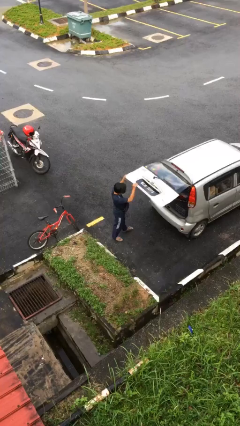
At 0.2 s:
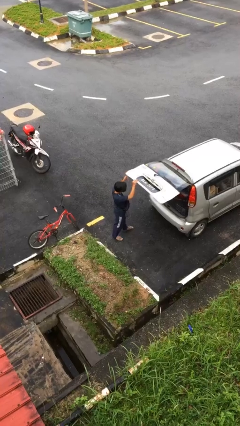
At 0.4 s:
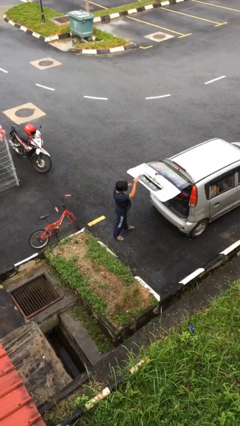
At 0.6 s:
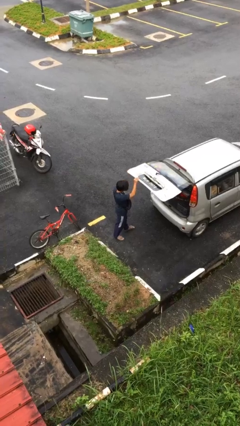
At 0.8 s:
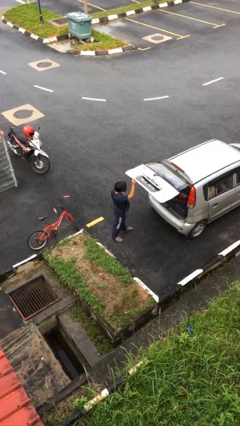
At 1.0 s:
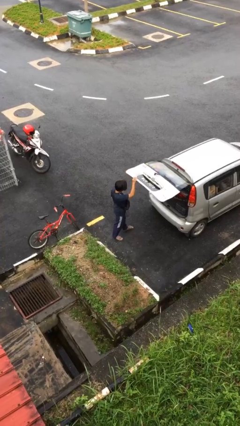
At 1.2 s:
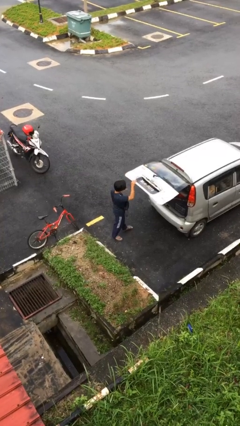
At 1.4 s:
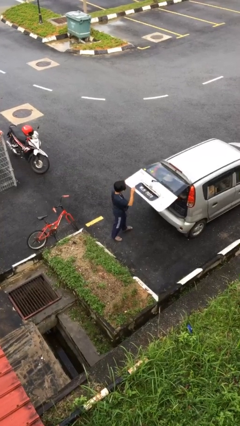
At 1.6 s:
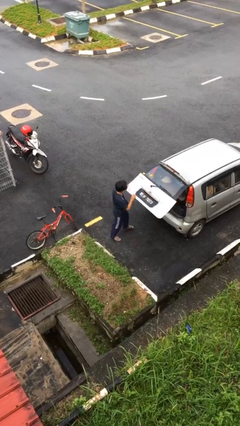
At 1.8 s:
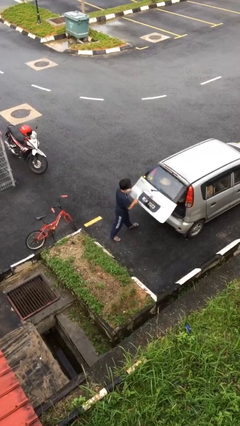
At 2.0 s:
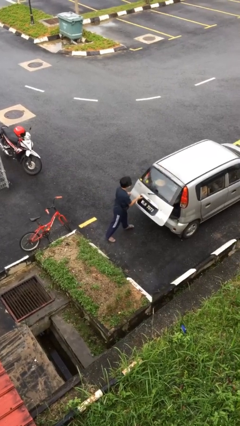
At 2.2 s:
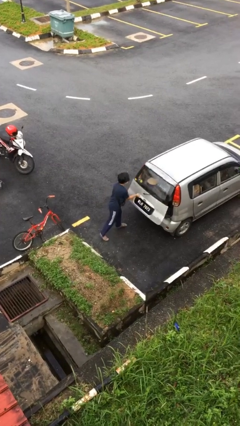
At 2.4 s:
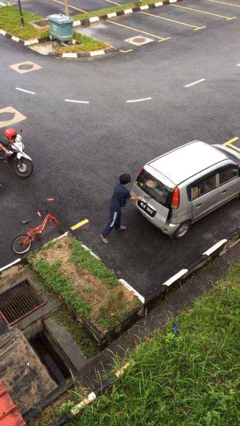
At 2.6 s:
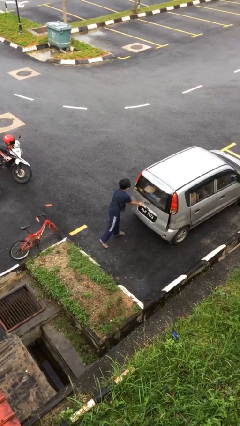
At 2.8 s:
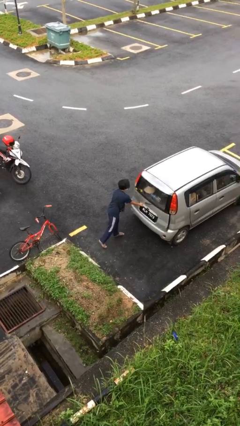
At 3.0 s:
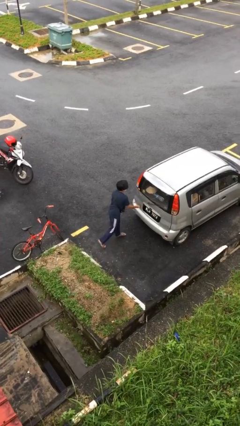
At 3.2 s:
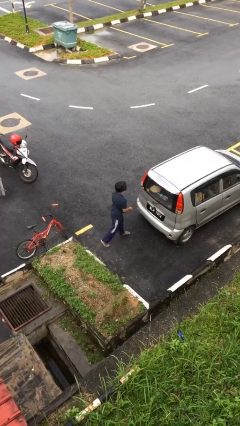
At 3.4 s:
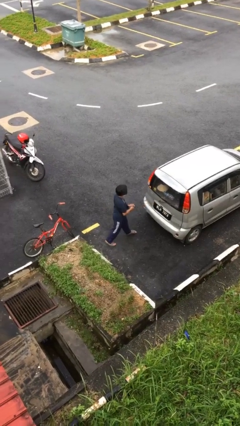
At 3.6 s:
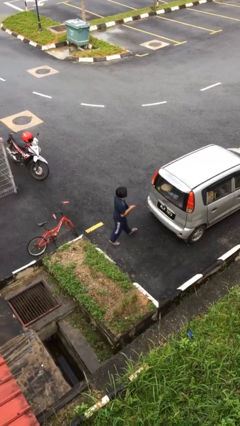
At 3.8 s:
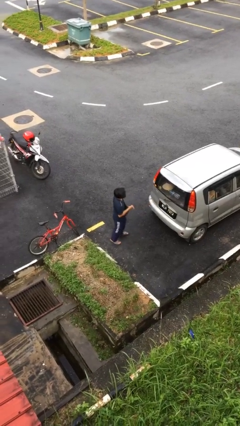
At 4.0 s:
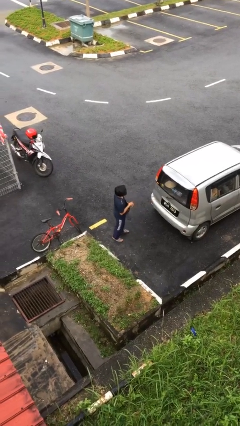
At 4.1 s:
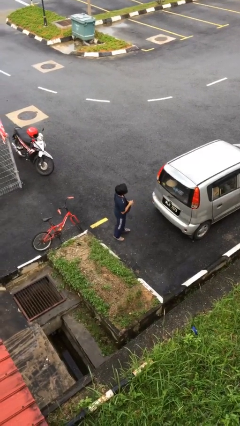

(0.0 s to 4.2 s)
person closes car trunk

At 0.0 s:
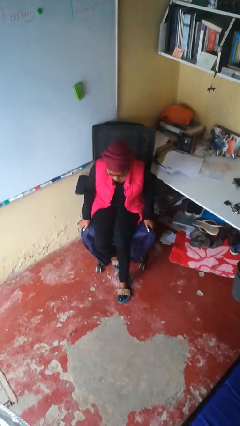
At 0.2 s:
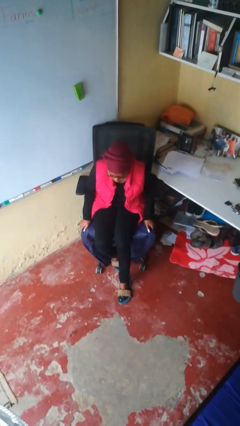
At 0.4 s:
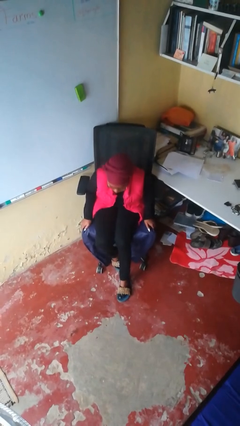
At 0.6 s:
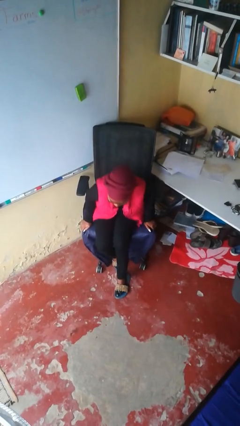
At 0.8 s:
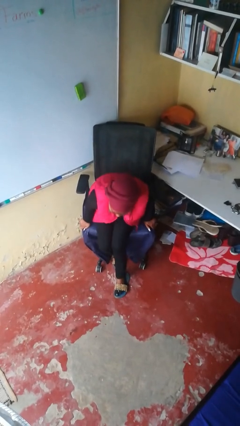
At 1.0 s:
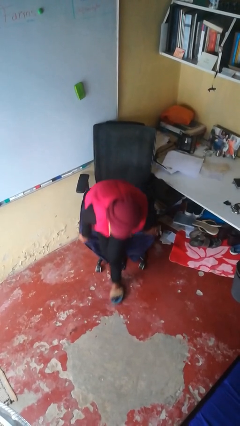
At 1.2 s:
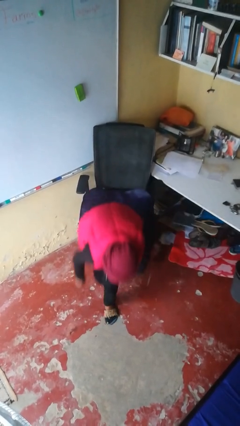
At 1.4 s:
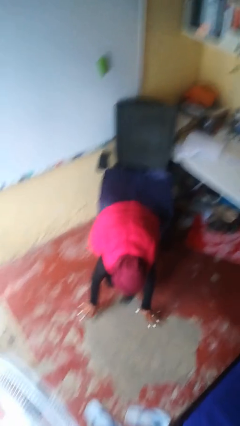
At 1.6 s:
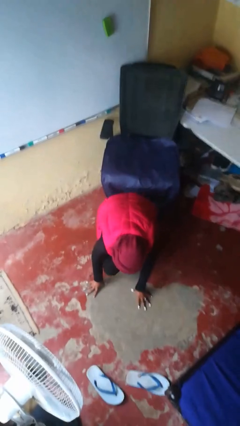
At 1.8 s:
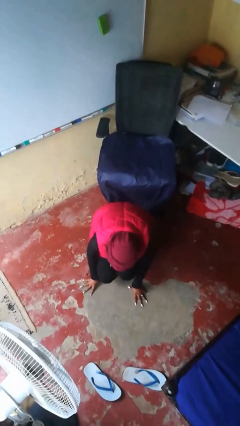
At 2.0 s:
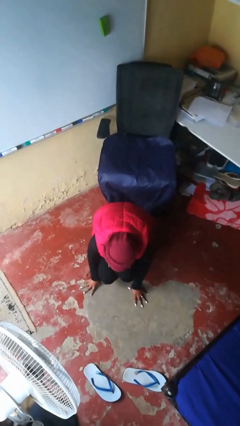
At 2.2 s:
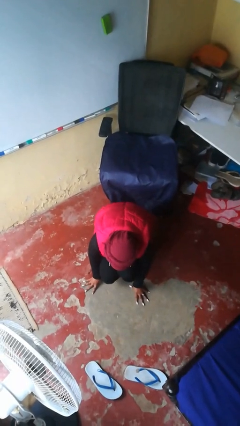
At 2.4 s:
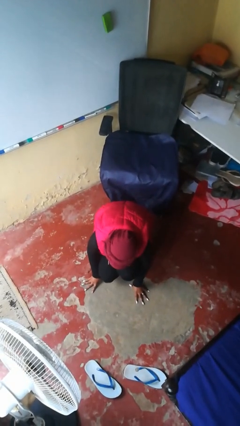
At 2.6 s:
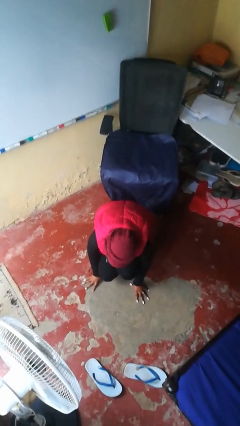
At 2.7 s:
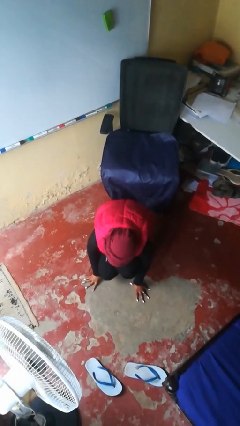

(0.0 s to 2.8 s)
person falls from chair

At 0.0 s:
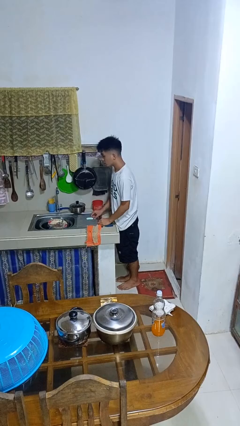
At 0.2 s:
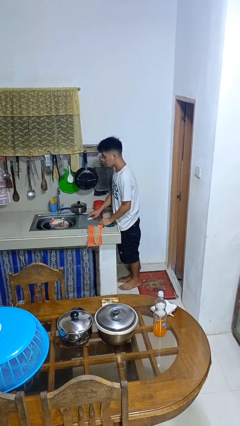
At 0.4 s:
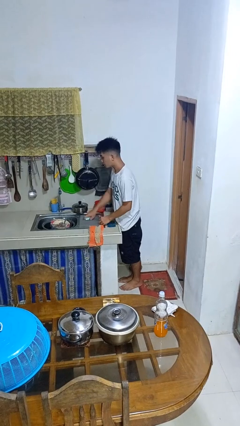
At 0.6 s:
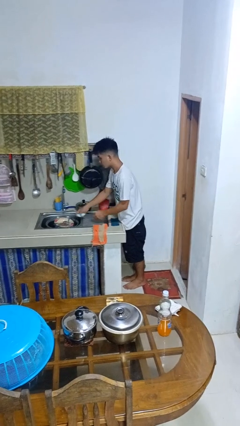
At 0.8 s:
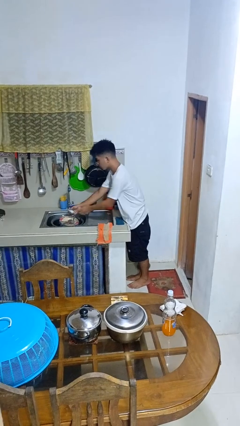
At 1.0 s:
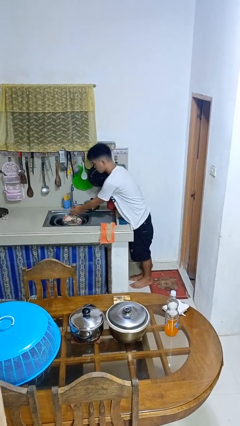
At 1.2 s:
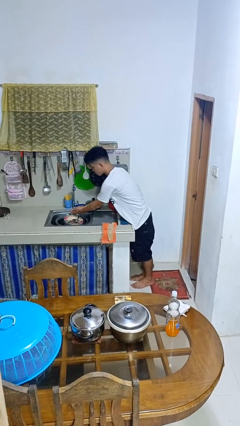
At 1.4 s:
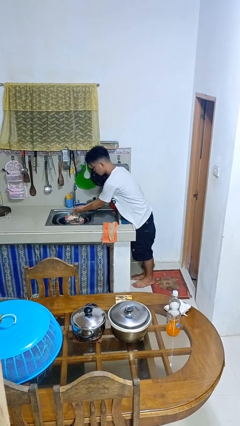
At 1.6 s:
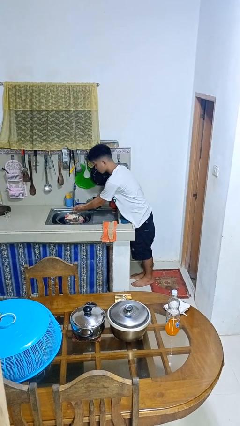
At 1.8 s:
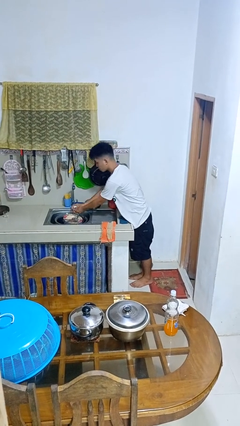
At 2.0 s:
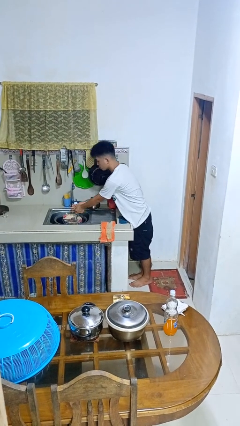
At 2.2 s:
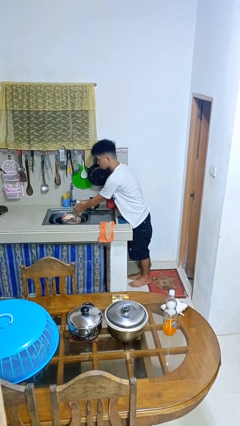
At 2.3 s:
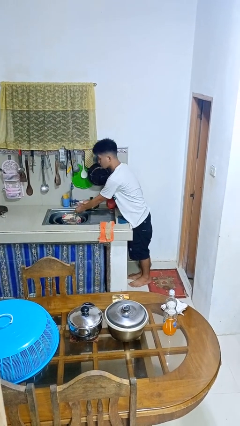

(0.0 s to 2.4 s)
person washes hands

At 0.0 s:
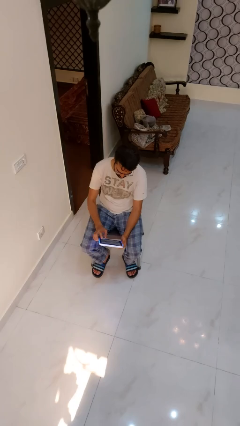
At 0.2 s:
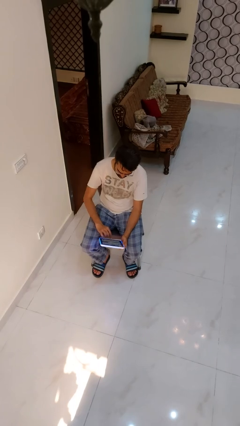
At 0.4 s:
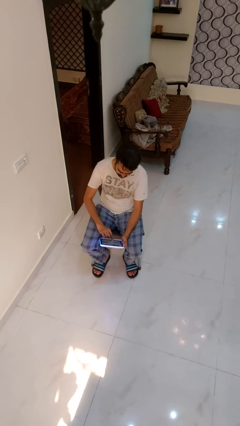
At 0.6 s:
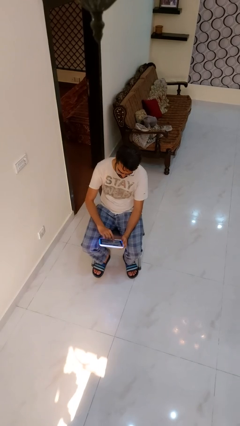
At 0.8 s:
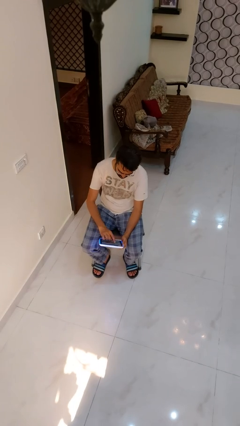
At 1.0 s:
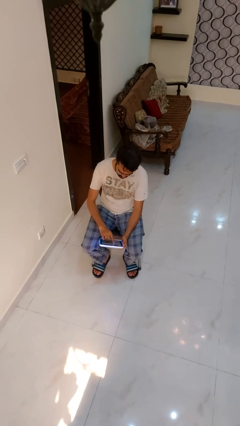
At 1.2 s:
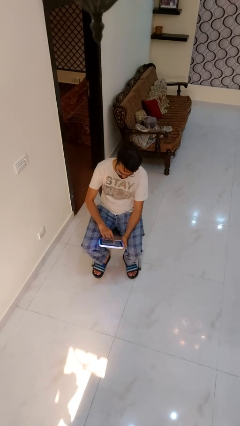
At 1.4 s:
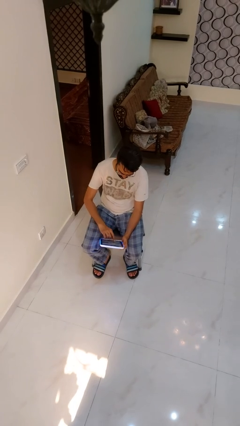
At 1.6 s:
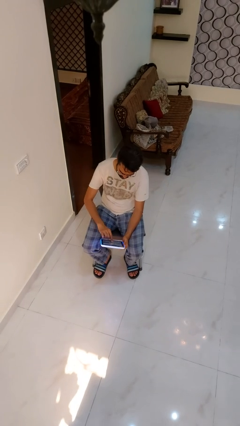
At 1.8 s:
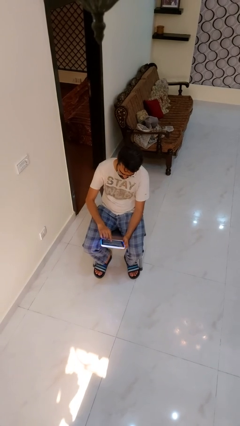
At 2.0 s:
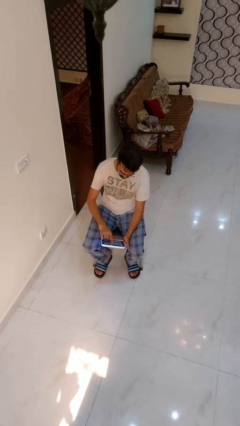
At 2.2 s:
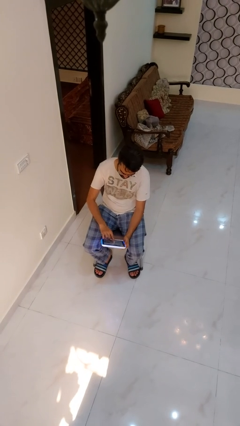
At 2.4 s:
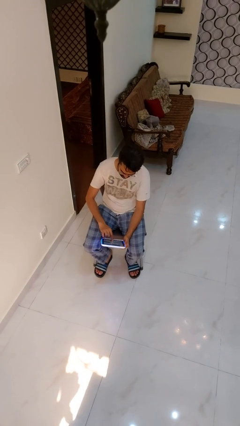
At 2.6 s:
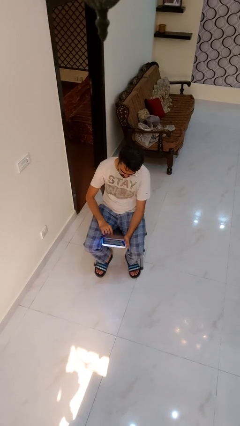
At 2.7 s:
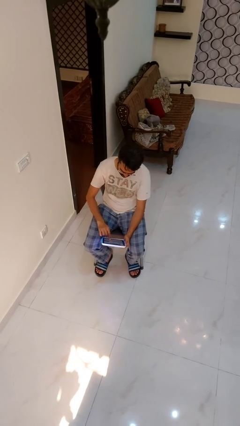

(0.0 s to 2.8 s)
person interacts with tablet

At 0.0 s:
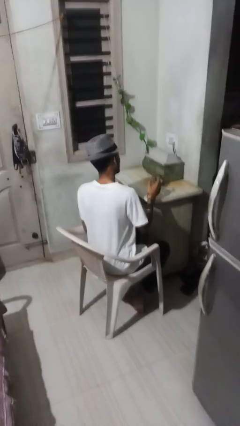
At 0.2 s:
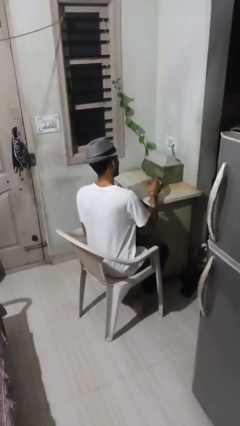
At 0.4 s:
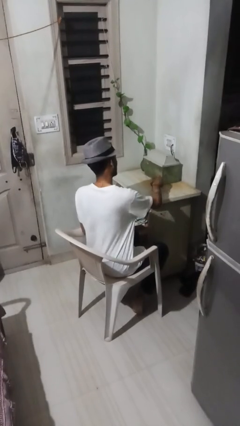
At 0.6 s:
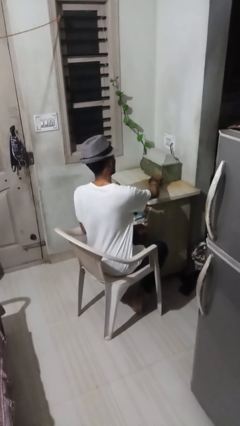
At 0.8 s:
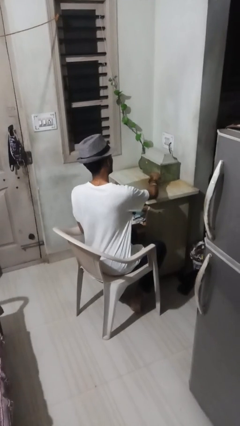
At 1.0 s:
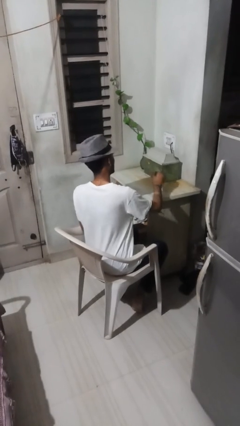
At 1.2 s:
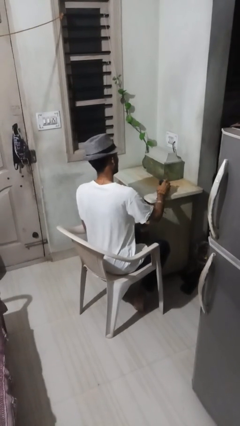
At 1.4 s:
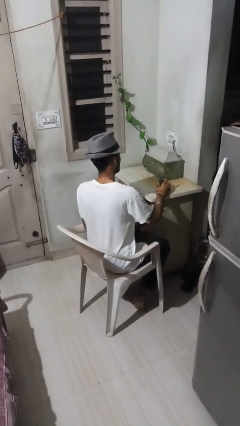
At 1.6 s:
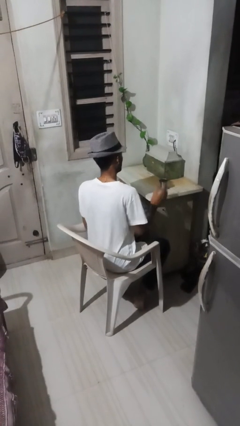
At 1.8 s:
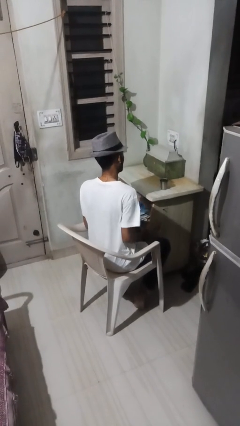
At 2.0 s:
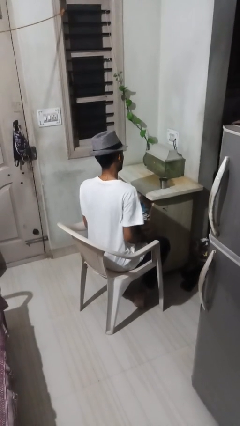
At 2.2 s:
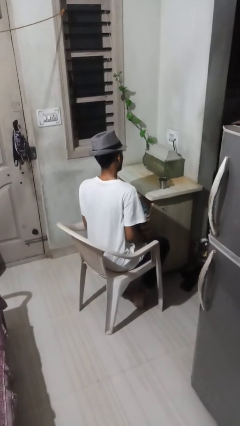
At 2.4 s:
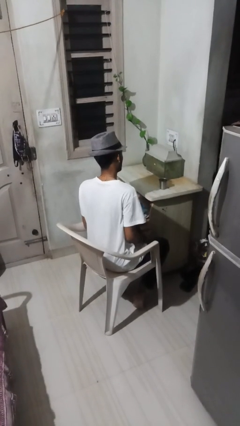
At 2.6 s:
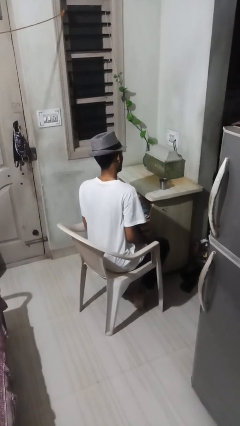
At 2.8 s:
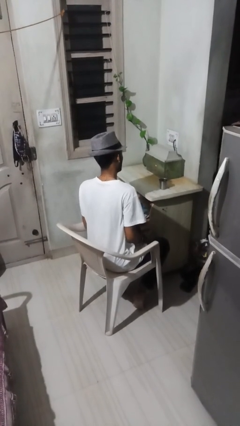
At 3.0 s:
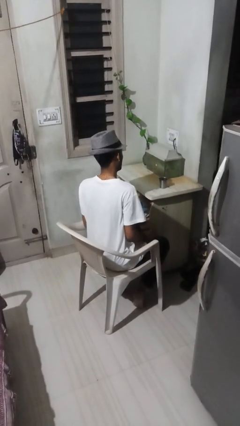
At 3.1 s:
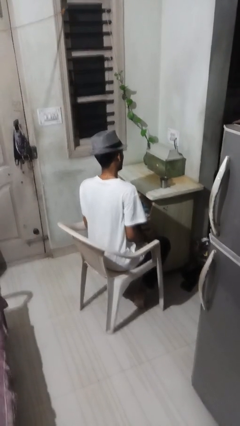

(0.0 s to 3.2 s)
person sets upright glass

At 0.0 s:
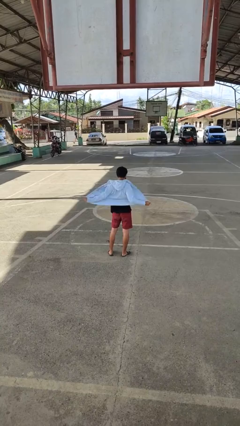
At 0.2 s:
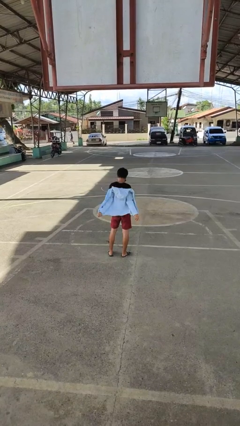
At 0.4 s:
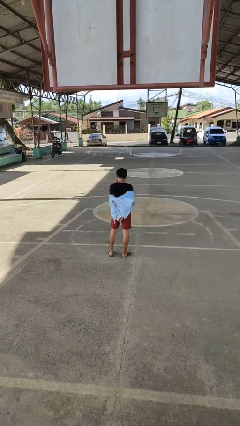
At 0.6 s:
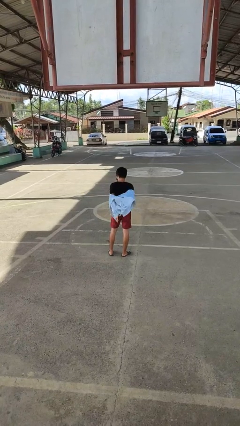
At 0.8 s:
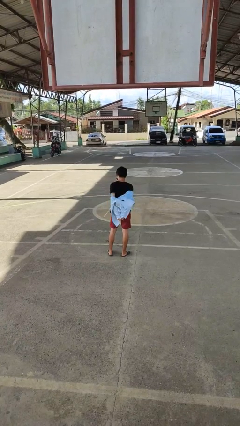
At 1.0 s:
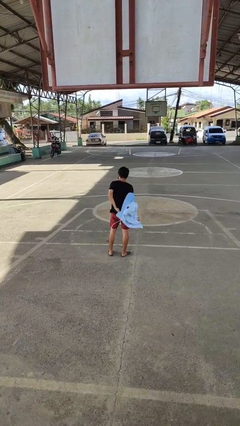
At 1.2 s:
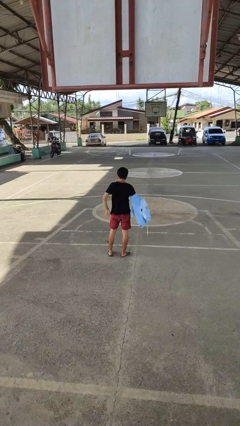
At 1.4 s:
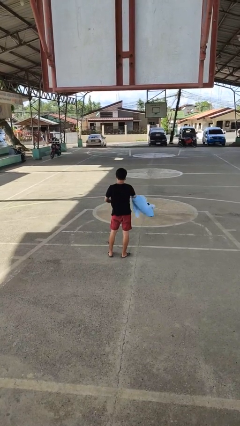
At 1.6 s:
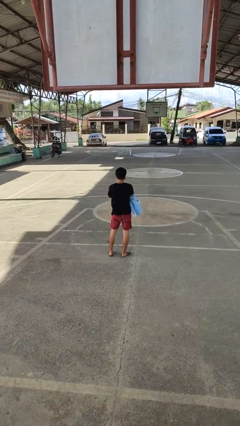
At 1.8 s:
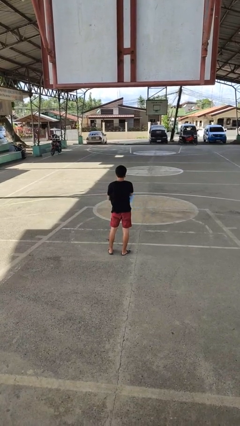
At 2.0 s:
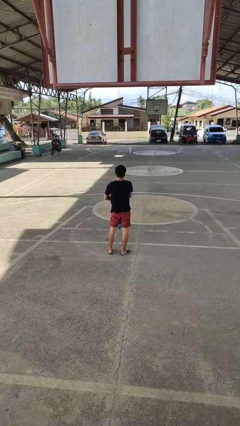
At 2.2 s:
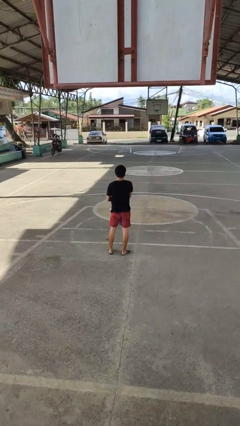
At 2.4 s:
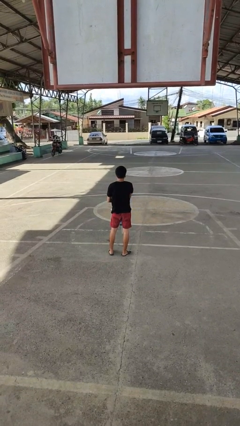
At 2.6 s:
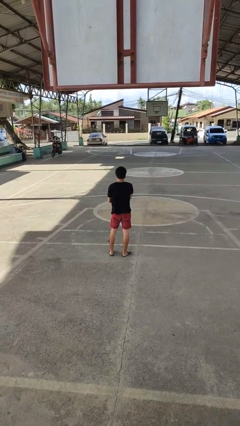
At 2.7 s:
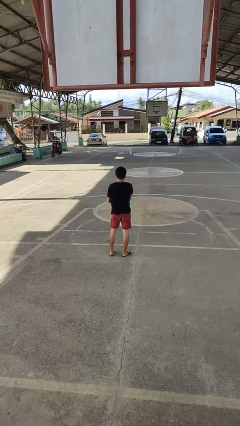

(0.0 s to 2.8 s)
person takes off jacket
